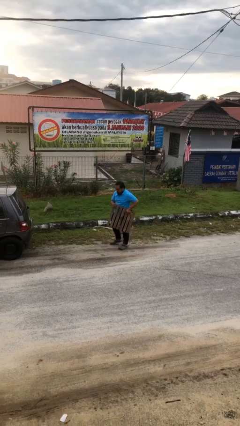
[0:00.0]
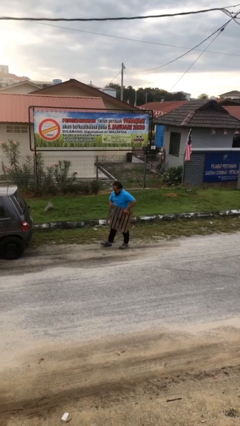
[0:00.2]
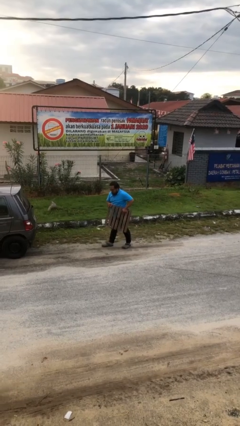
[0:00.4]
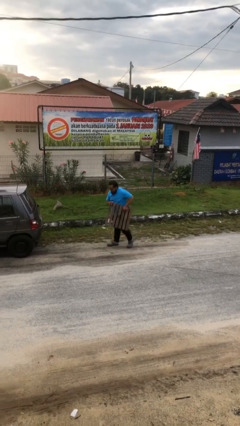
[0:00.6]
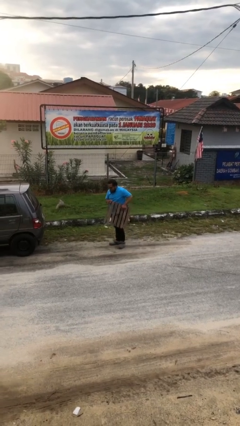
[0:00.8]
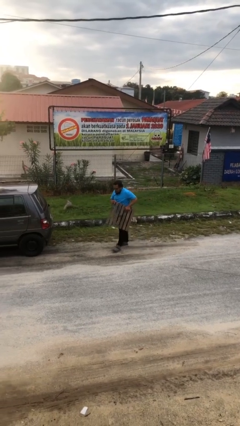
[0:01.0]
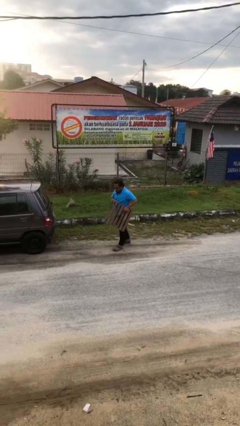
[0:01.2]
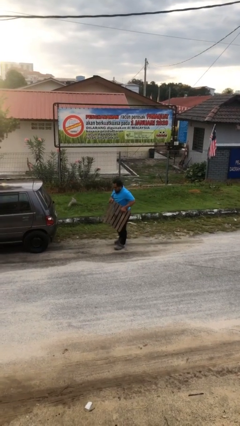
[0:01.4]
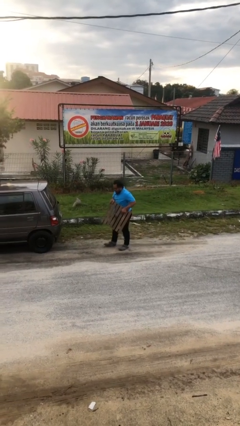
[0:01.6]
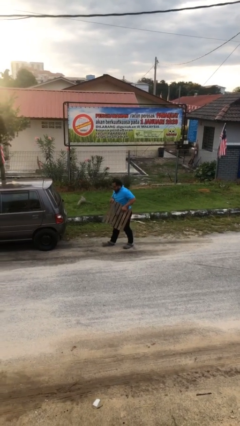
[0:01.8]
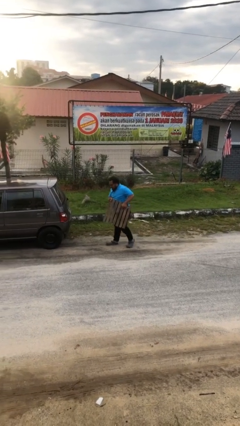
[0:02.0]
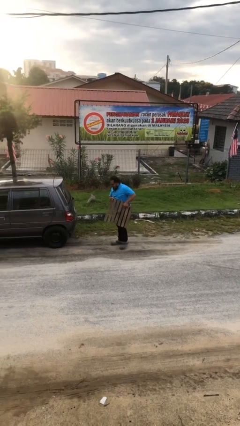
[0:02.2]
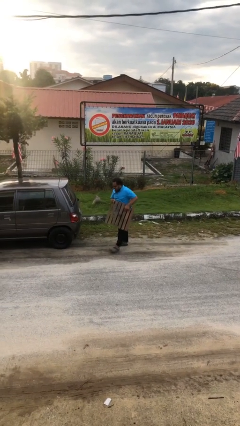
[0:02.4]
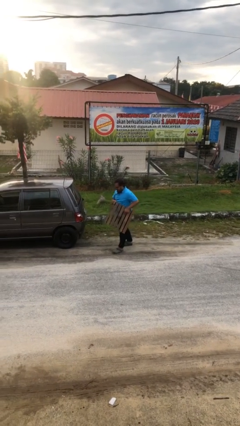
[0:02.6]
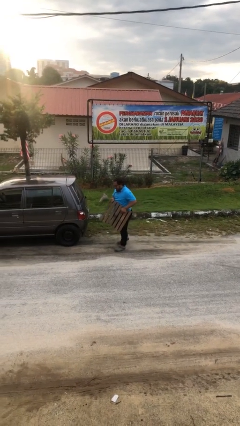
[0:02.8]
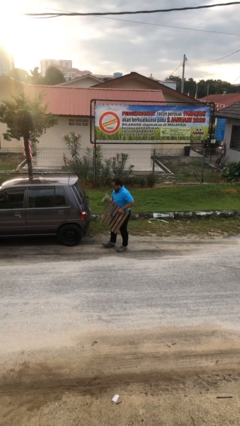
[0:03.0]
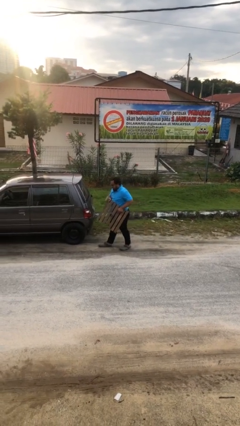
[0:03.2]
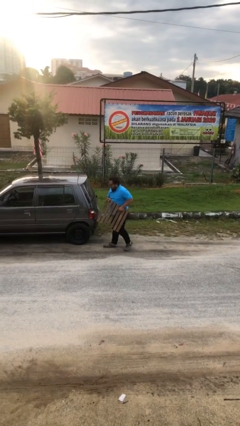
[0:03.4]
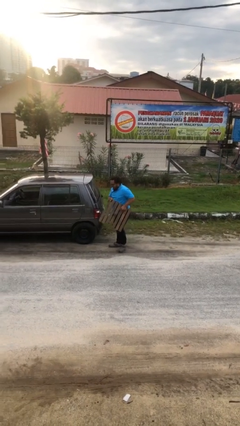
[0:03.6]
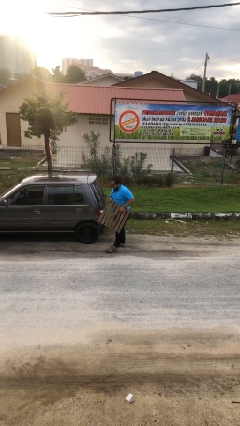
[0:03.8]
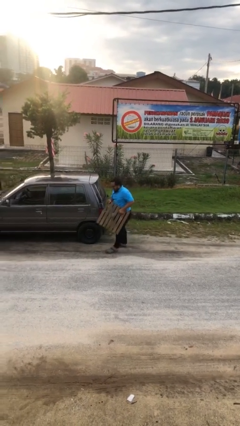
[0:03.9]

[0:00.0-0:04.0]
person carries heavy object

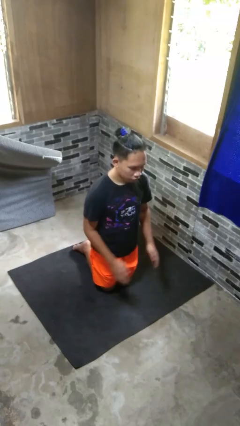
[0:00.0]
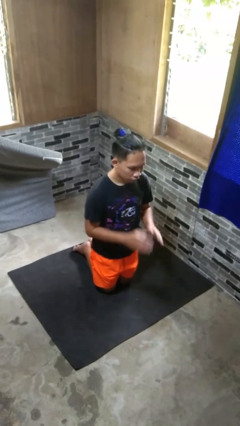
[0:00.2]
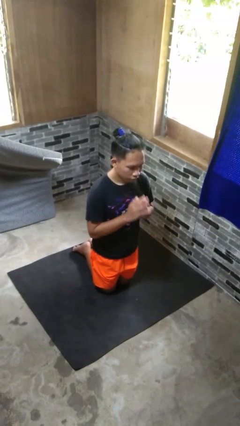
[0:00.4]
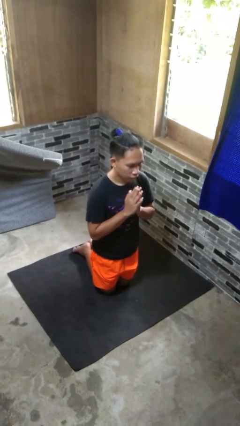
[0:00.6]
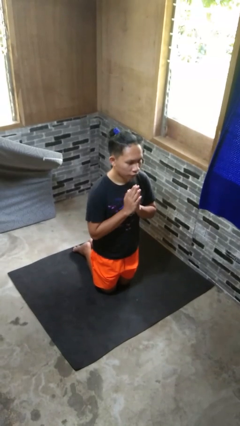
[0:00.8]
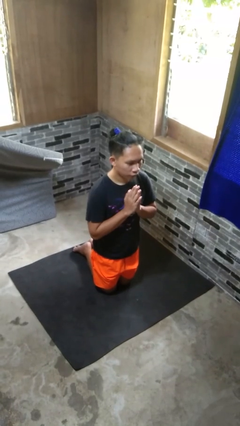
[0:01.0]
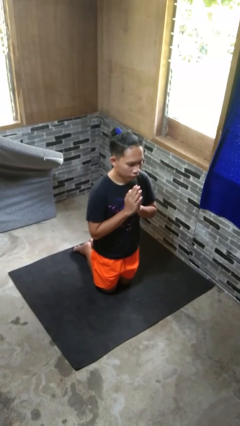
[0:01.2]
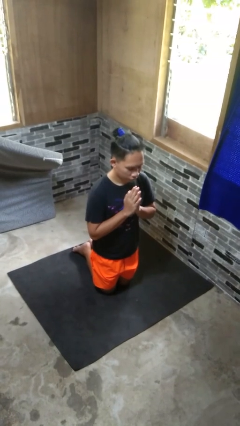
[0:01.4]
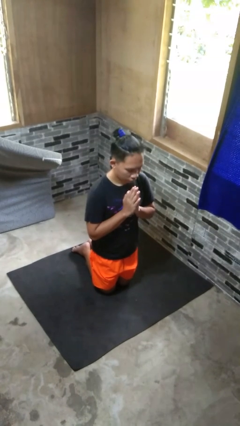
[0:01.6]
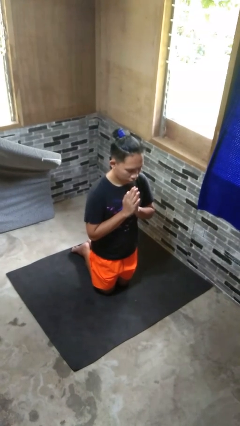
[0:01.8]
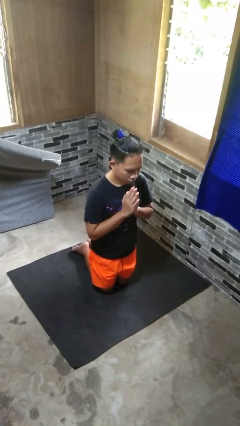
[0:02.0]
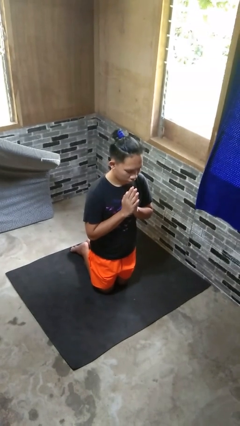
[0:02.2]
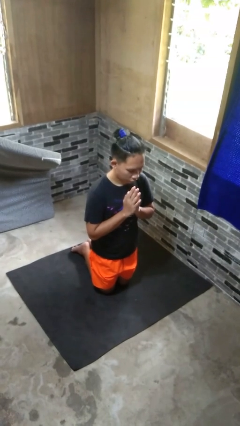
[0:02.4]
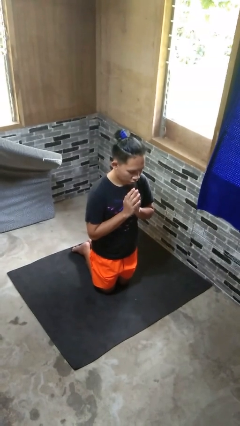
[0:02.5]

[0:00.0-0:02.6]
person prays

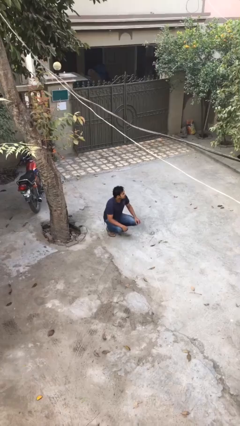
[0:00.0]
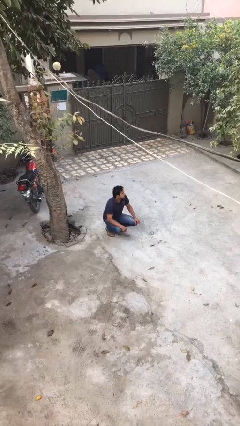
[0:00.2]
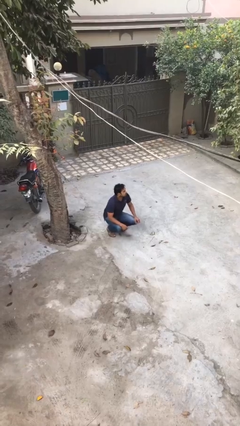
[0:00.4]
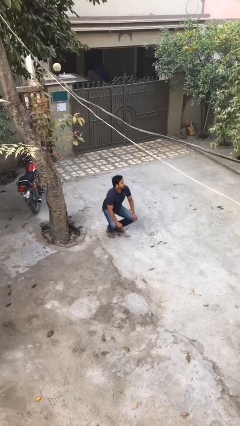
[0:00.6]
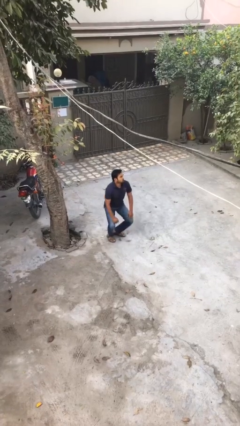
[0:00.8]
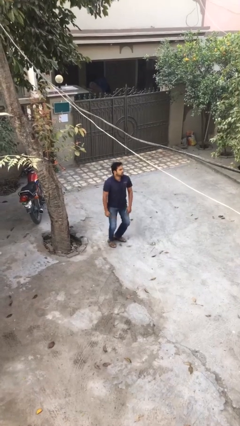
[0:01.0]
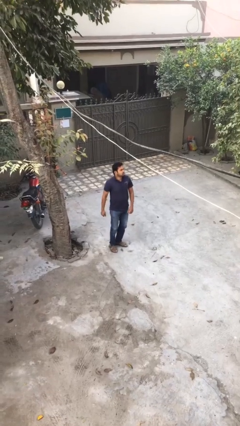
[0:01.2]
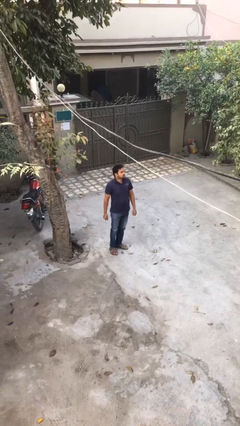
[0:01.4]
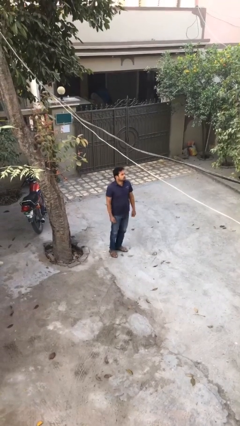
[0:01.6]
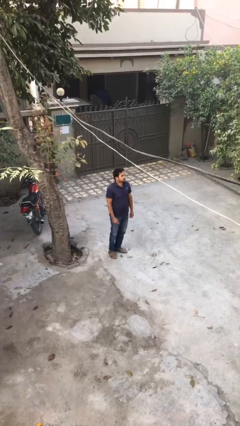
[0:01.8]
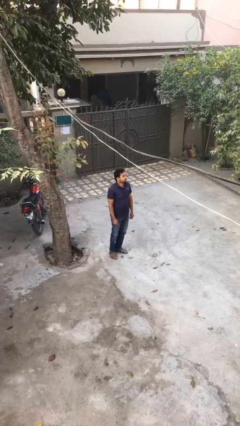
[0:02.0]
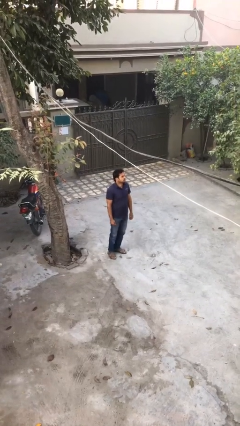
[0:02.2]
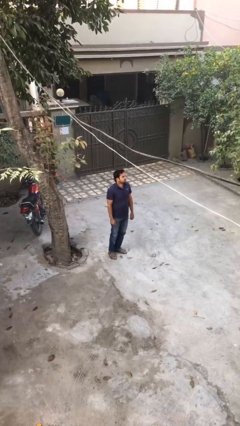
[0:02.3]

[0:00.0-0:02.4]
person stands up

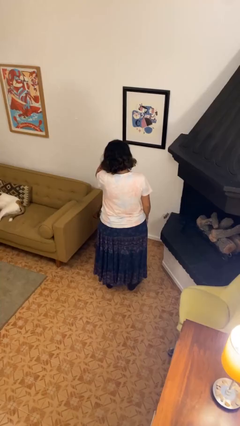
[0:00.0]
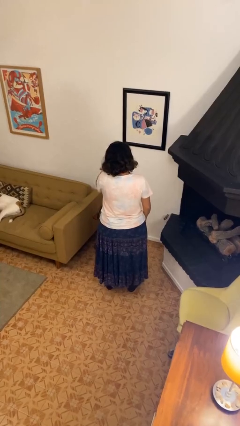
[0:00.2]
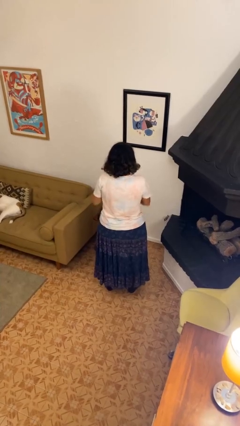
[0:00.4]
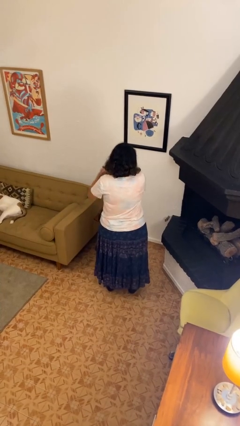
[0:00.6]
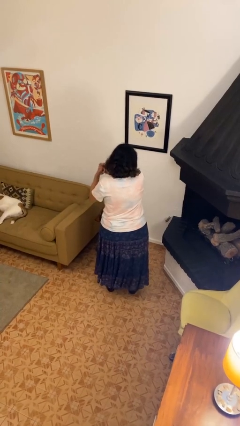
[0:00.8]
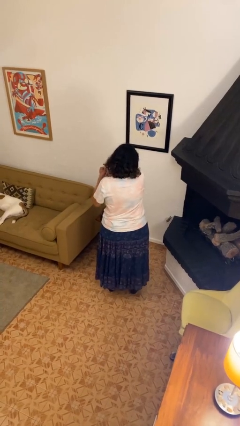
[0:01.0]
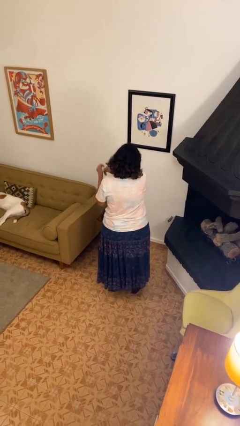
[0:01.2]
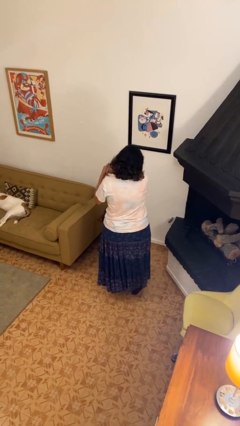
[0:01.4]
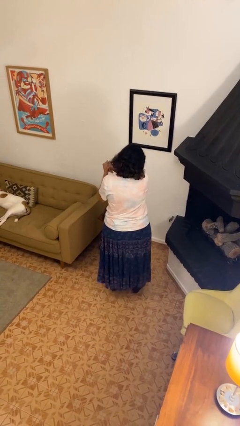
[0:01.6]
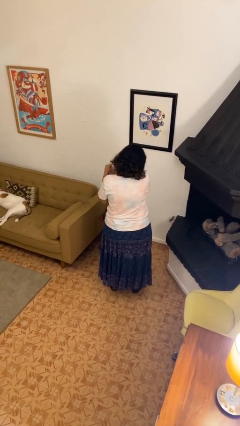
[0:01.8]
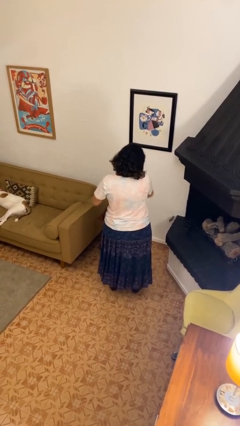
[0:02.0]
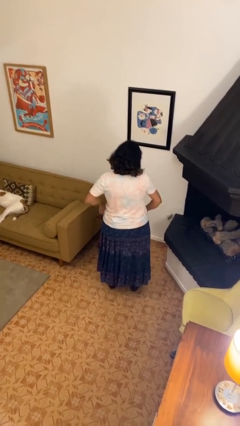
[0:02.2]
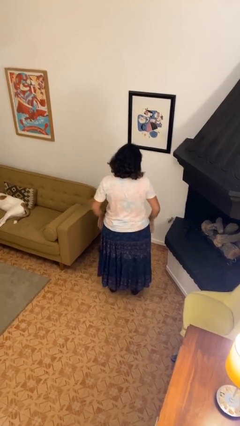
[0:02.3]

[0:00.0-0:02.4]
person cracks knuckles

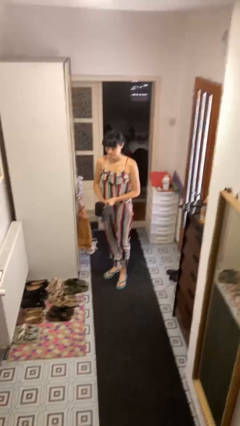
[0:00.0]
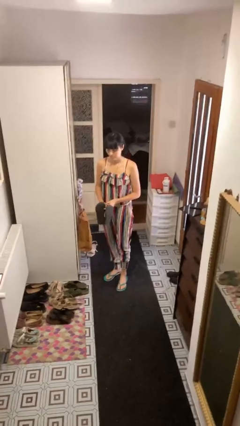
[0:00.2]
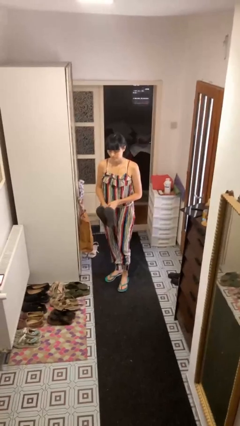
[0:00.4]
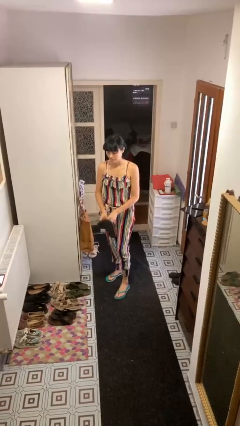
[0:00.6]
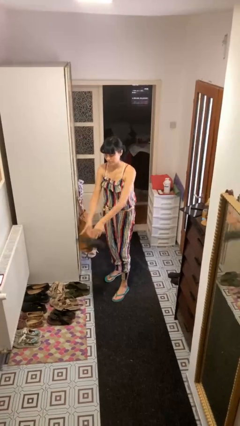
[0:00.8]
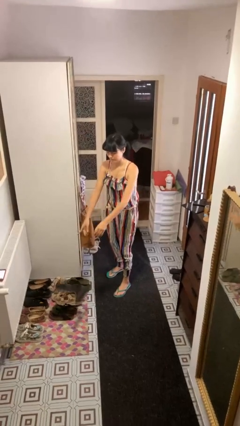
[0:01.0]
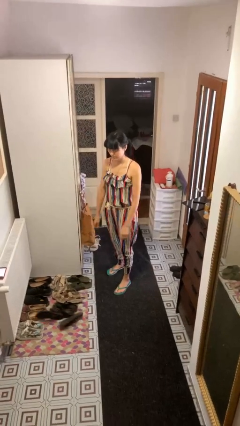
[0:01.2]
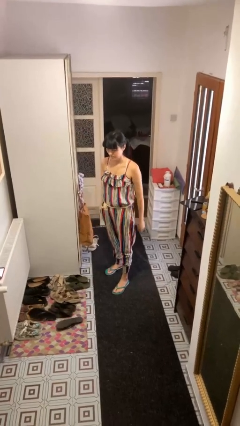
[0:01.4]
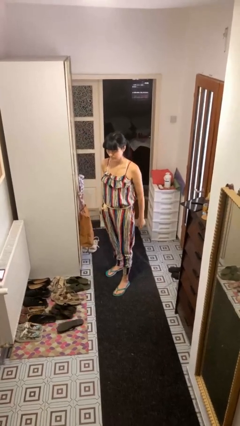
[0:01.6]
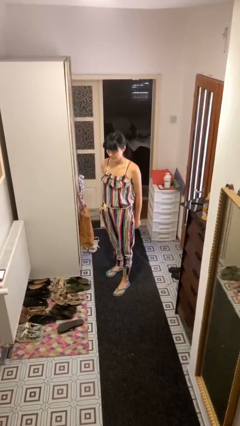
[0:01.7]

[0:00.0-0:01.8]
person throws object to ground

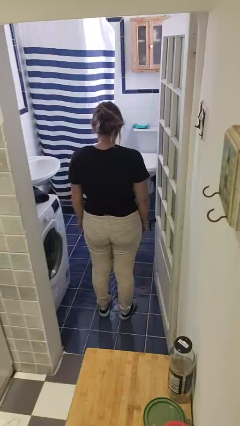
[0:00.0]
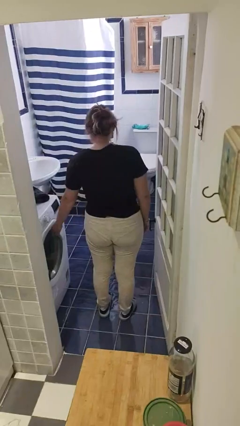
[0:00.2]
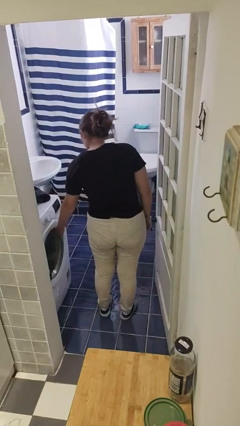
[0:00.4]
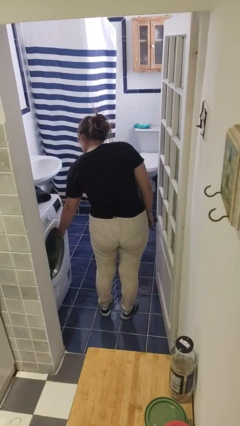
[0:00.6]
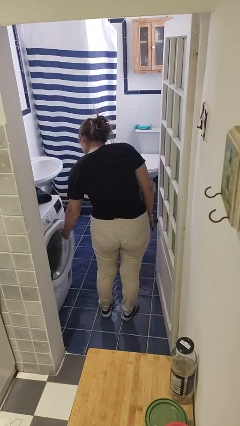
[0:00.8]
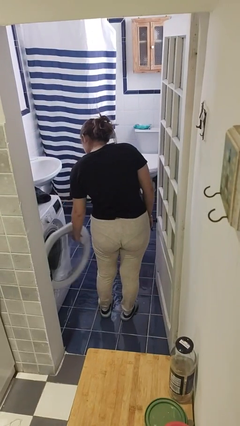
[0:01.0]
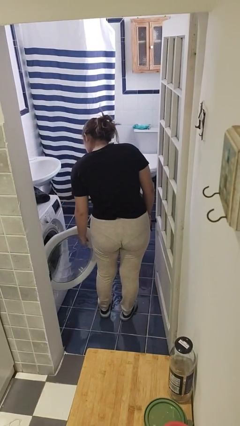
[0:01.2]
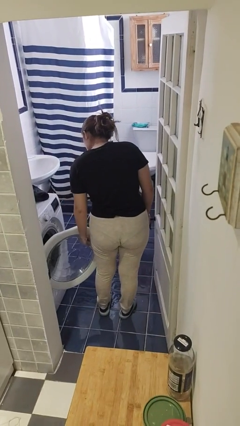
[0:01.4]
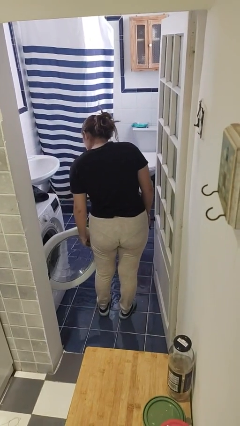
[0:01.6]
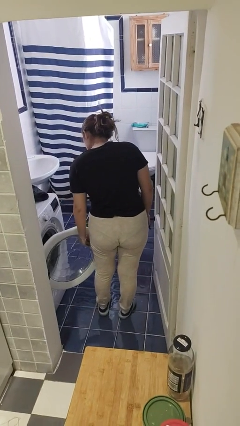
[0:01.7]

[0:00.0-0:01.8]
person opens clothes washer

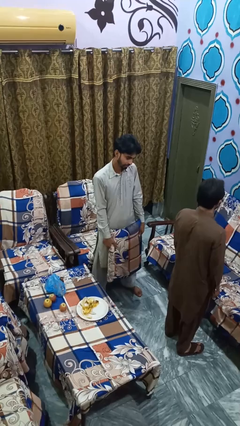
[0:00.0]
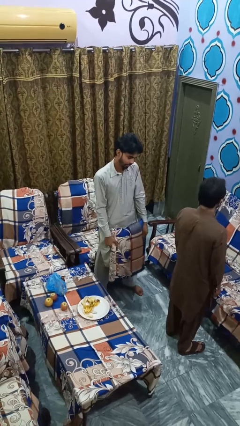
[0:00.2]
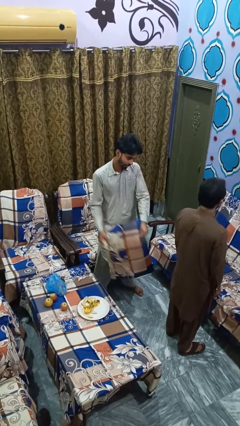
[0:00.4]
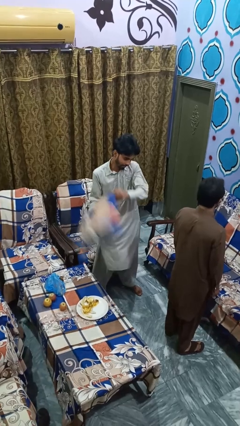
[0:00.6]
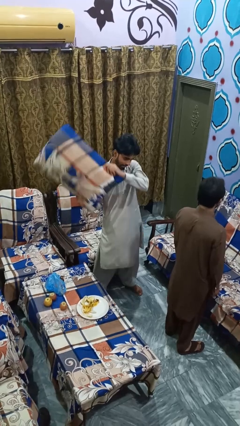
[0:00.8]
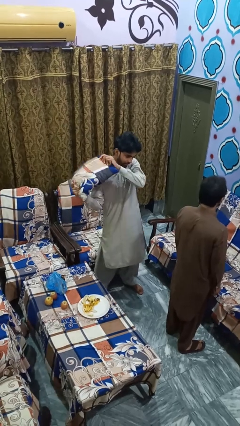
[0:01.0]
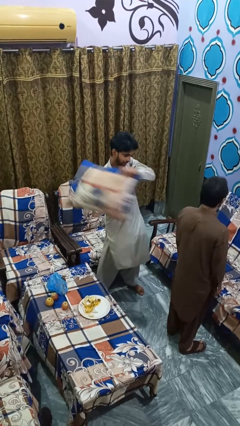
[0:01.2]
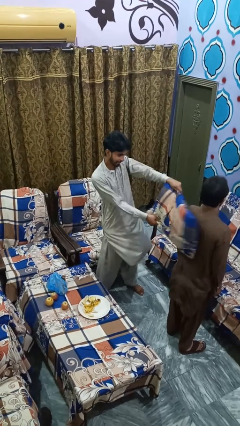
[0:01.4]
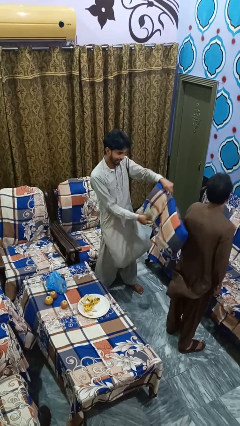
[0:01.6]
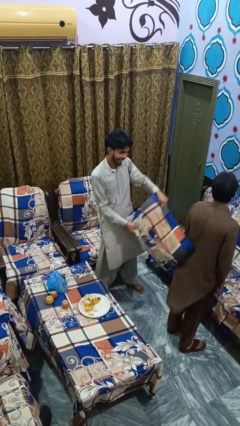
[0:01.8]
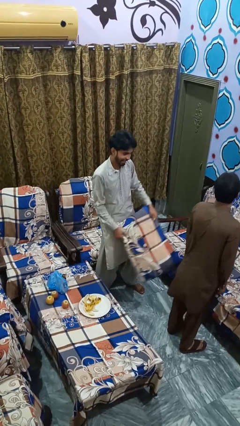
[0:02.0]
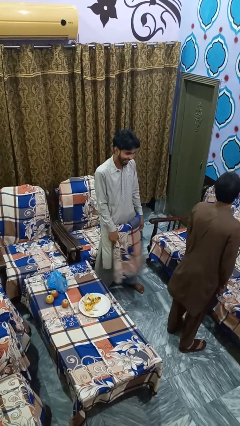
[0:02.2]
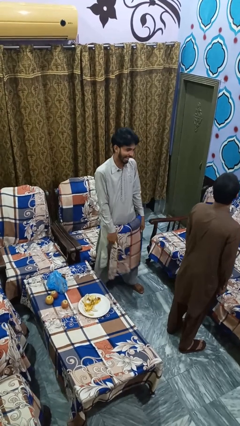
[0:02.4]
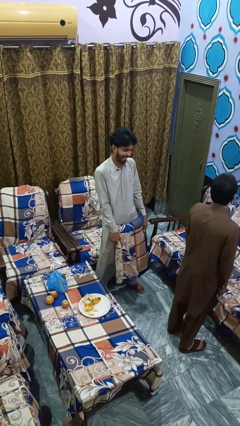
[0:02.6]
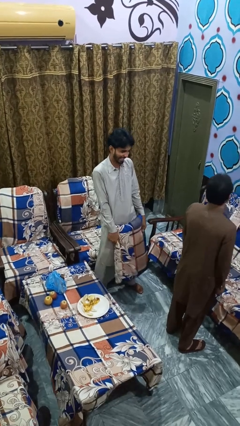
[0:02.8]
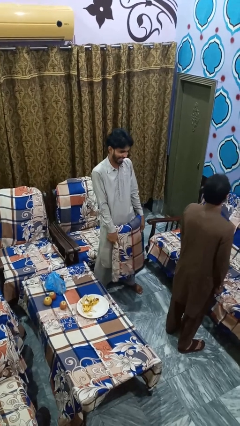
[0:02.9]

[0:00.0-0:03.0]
person hits person with pillow
